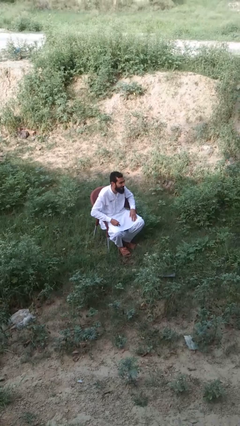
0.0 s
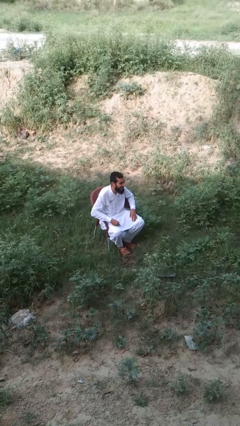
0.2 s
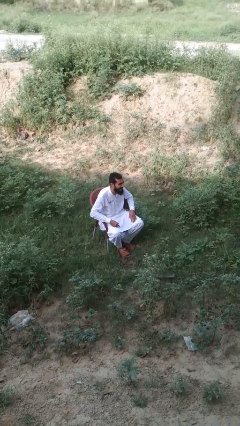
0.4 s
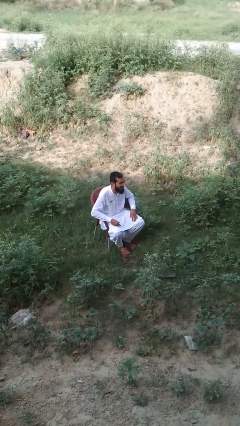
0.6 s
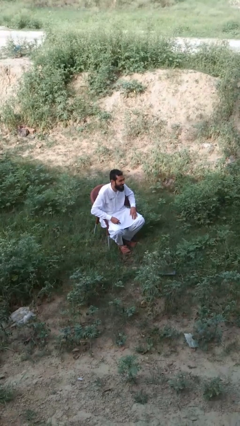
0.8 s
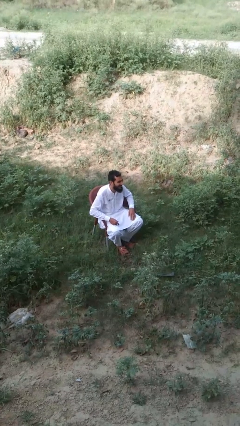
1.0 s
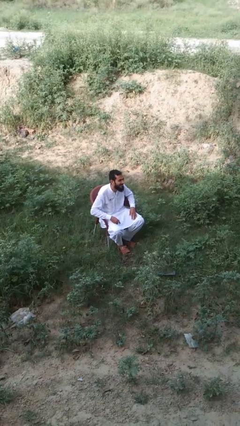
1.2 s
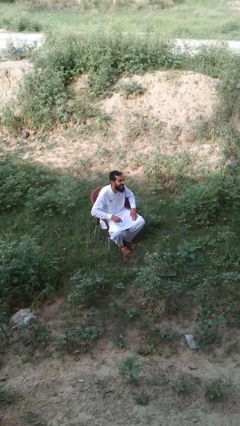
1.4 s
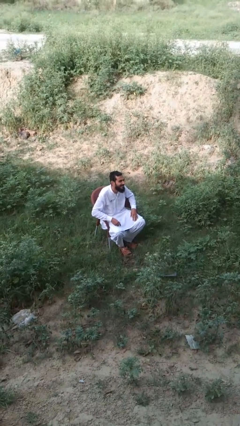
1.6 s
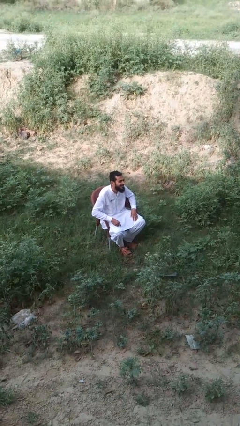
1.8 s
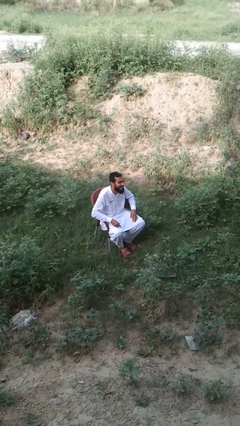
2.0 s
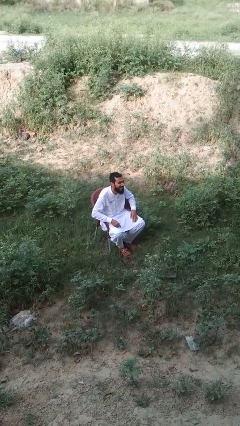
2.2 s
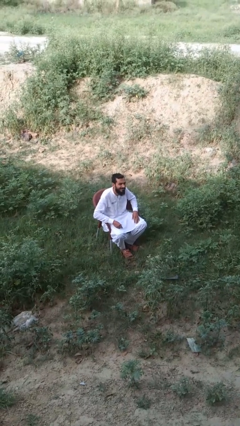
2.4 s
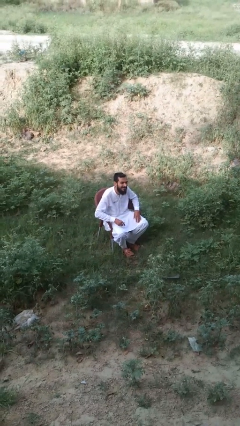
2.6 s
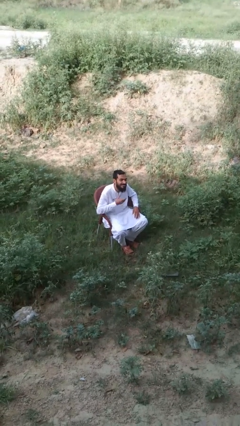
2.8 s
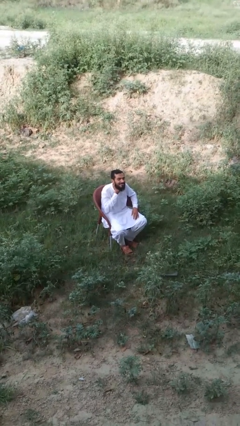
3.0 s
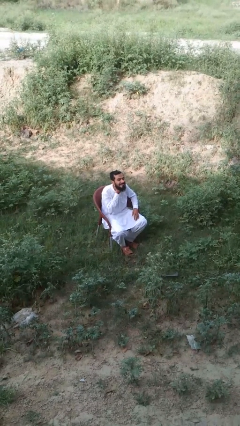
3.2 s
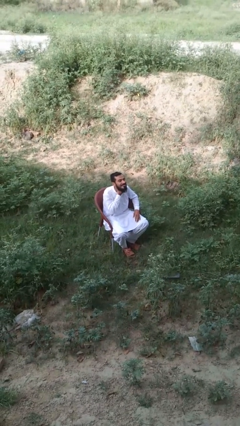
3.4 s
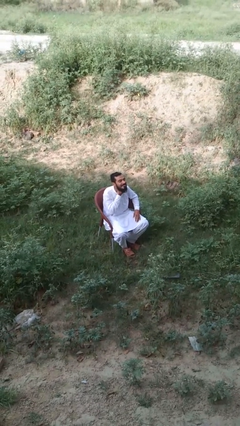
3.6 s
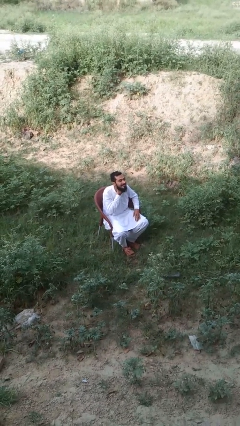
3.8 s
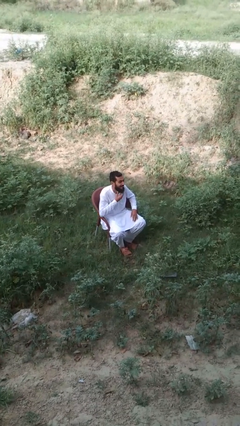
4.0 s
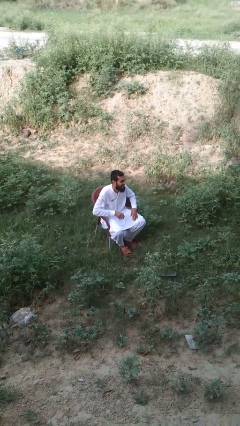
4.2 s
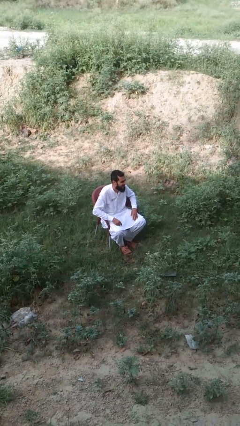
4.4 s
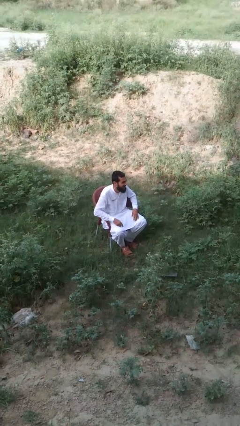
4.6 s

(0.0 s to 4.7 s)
person rubs neck

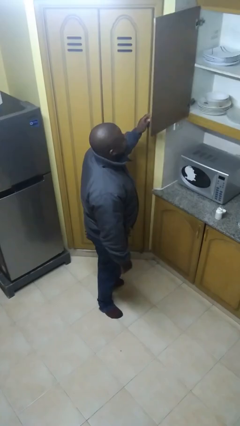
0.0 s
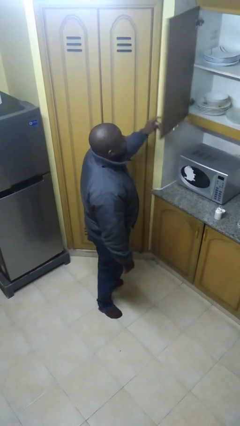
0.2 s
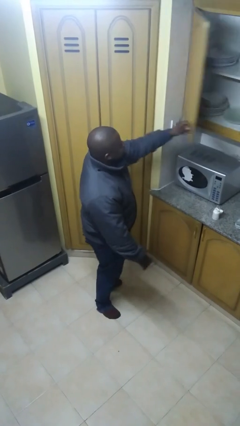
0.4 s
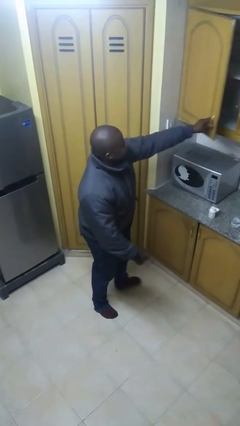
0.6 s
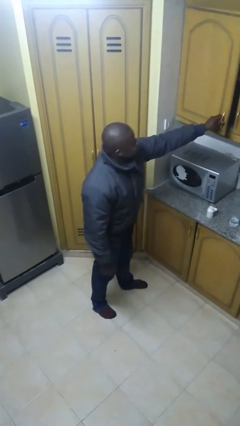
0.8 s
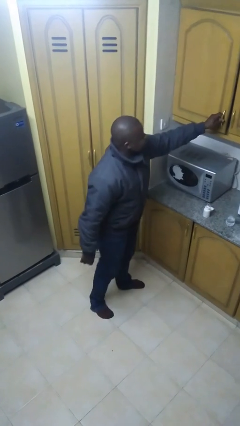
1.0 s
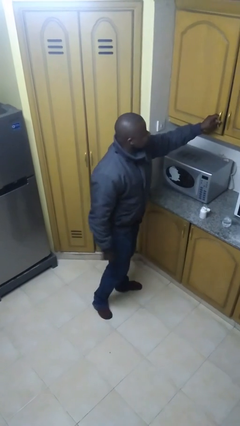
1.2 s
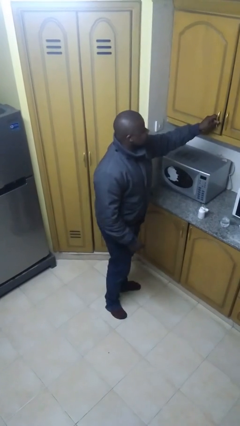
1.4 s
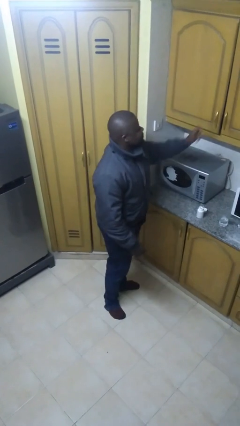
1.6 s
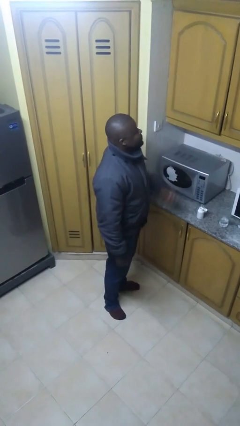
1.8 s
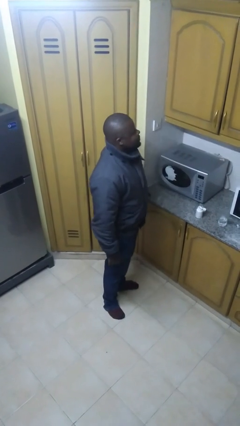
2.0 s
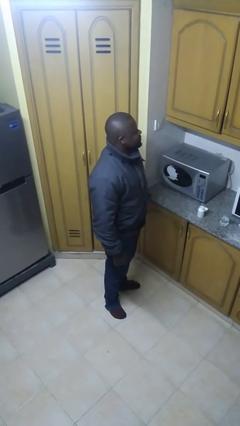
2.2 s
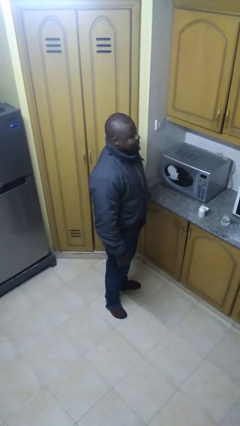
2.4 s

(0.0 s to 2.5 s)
person closes cabinet

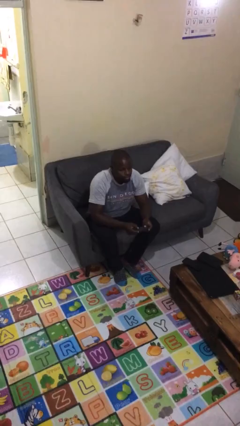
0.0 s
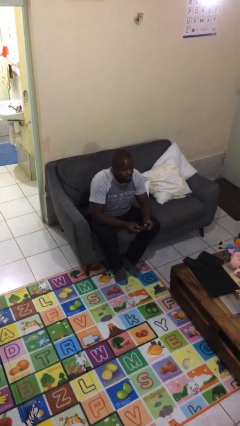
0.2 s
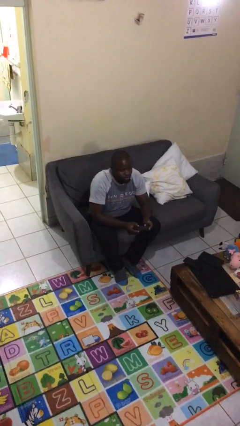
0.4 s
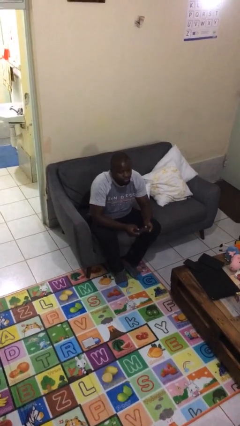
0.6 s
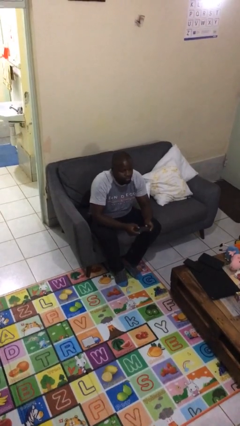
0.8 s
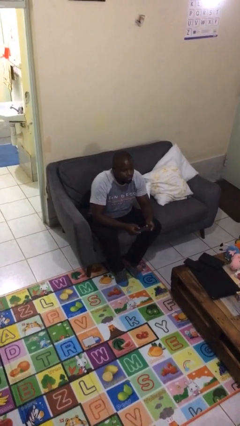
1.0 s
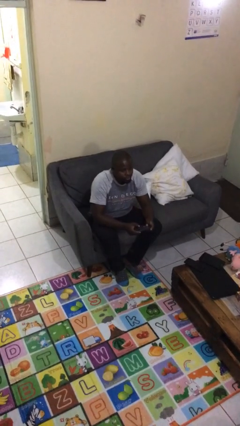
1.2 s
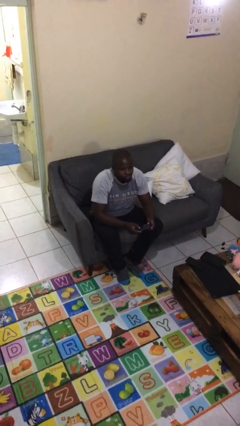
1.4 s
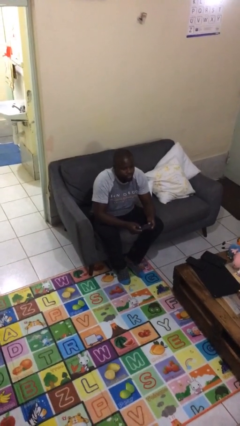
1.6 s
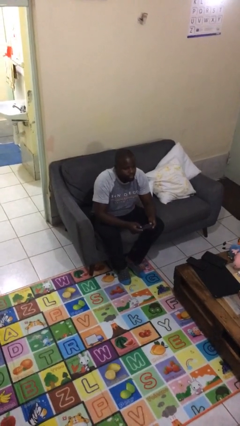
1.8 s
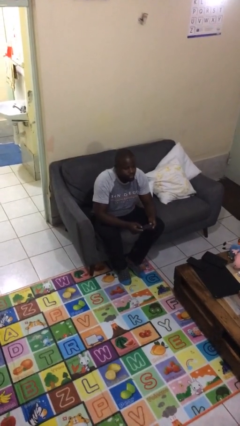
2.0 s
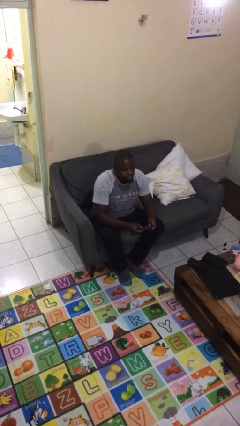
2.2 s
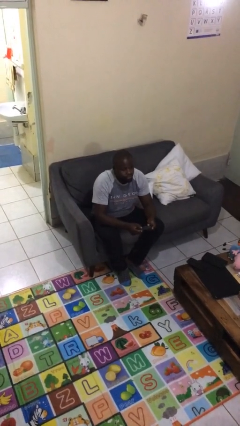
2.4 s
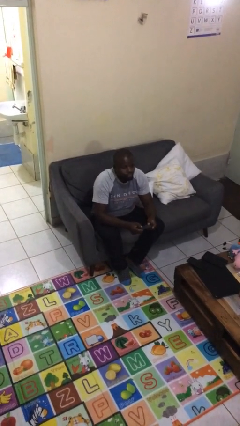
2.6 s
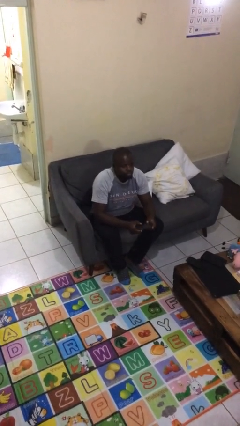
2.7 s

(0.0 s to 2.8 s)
person interacts with handheld game

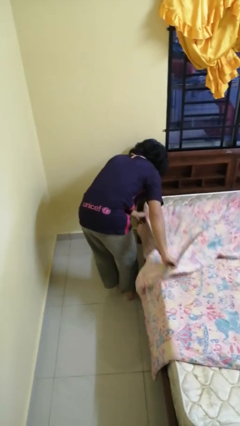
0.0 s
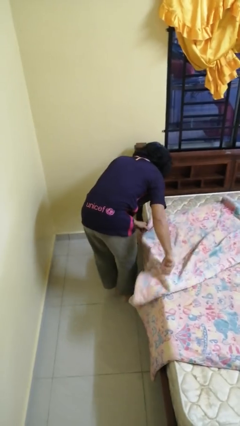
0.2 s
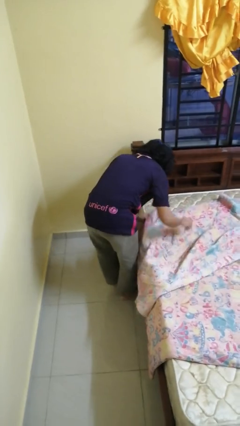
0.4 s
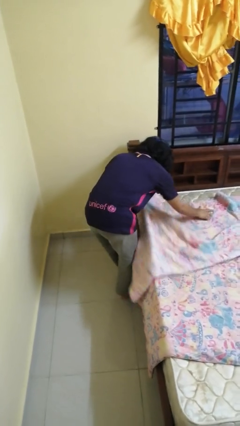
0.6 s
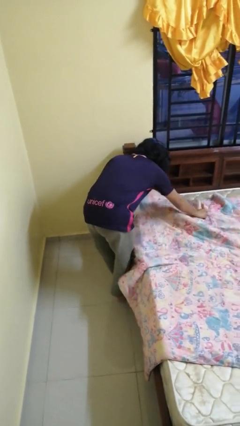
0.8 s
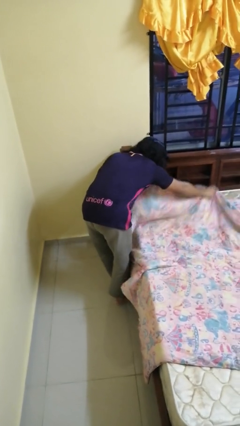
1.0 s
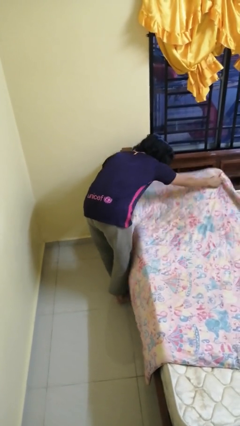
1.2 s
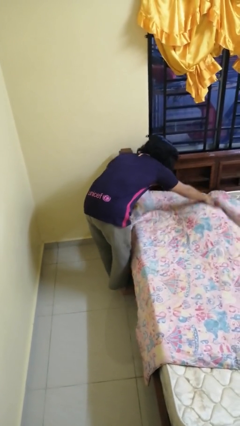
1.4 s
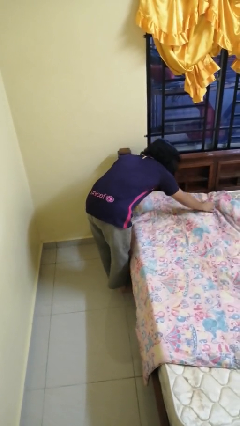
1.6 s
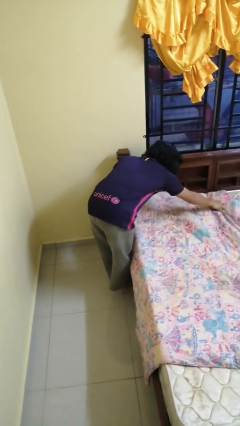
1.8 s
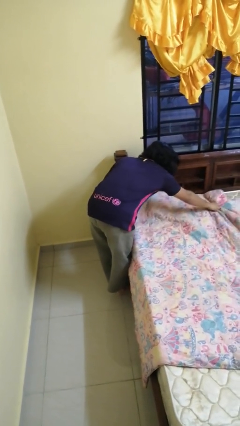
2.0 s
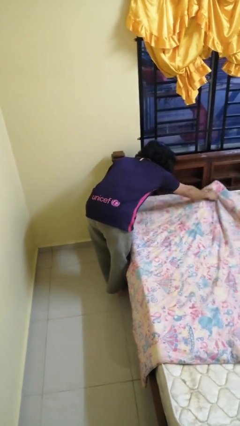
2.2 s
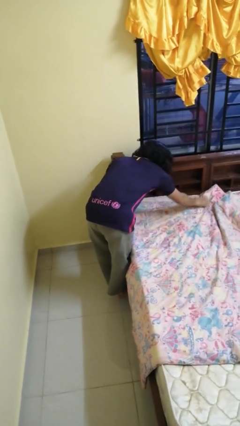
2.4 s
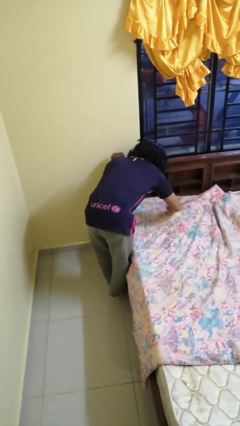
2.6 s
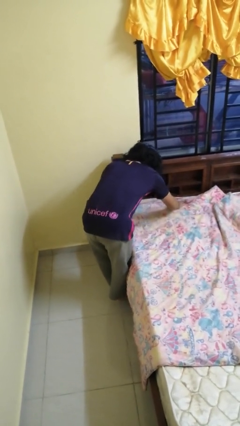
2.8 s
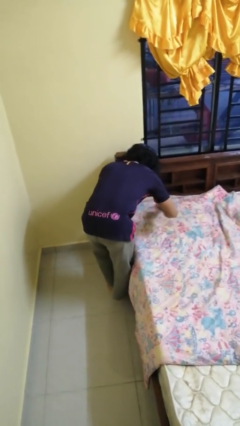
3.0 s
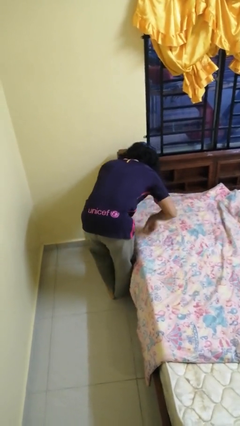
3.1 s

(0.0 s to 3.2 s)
person makes bed

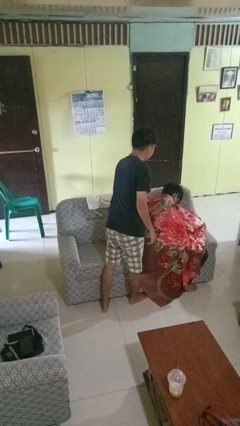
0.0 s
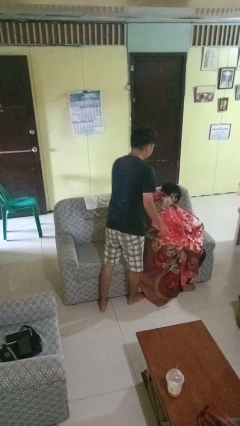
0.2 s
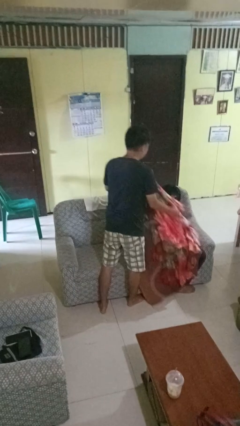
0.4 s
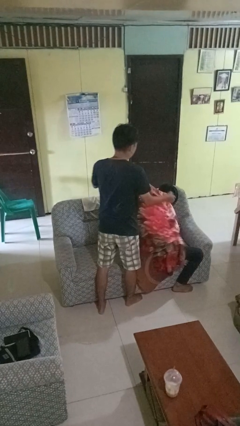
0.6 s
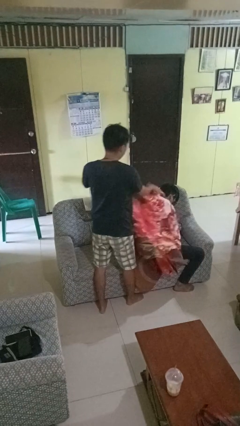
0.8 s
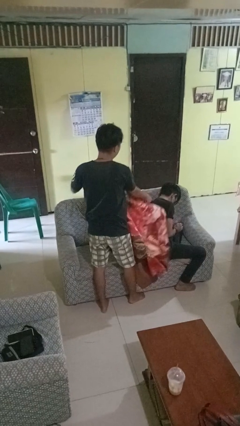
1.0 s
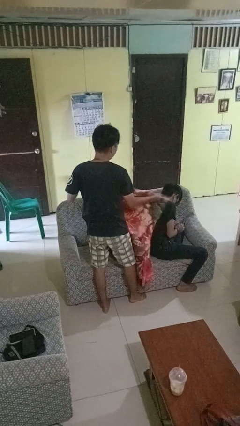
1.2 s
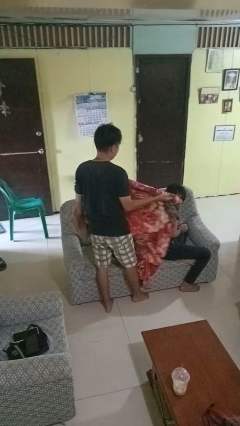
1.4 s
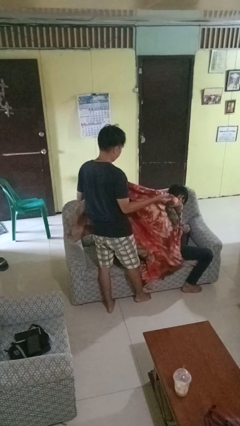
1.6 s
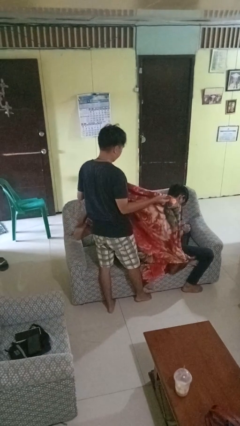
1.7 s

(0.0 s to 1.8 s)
person uncovers friend with blanket

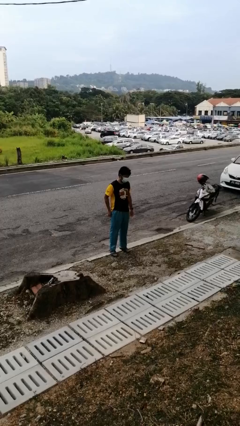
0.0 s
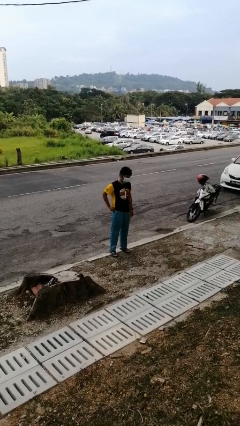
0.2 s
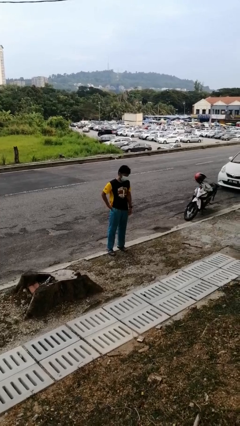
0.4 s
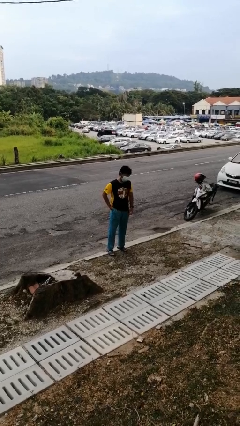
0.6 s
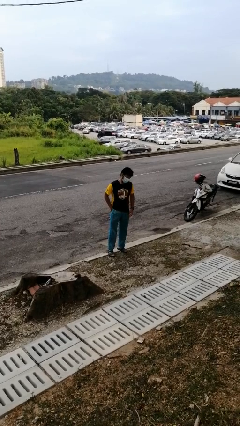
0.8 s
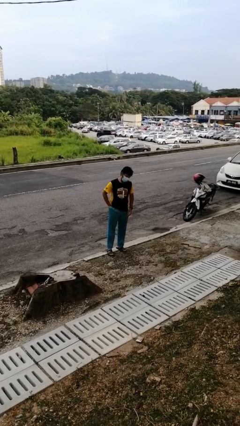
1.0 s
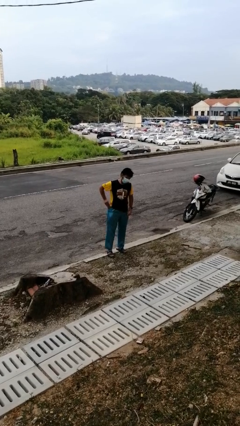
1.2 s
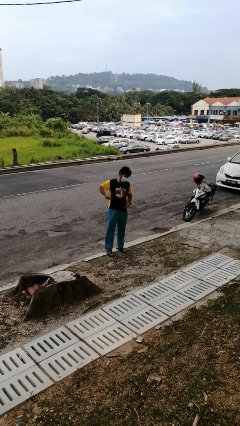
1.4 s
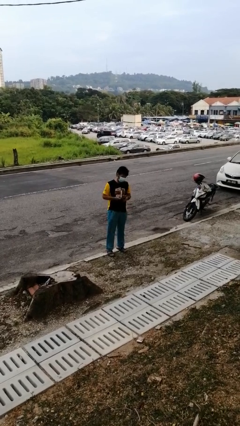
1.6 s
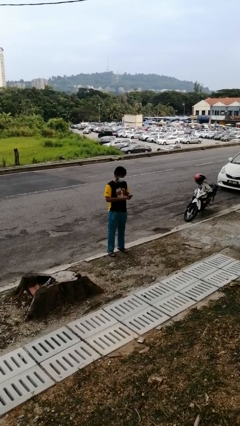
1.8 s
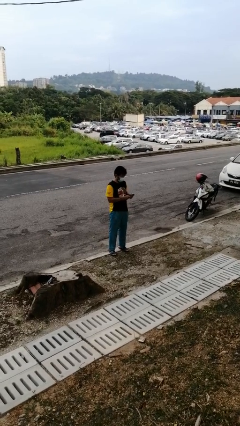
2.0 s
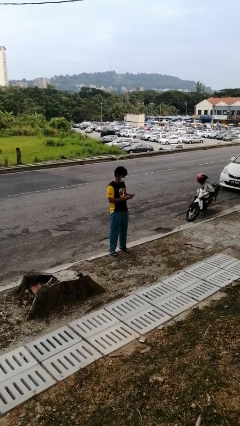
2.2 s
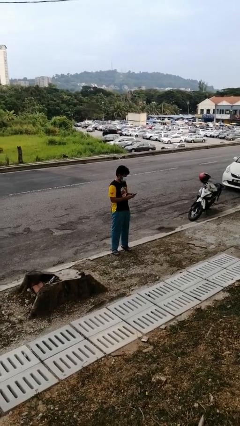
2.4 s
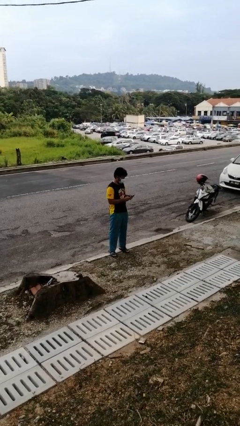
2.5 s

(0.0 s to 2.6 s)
person takes phone from pocket
